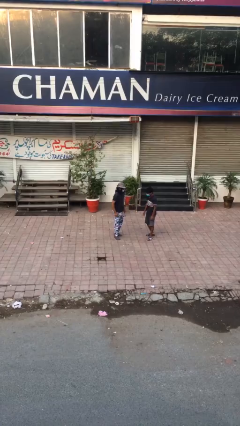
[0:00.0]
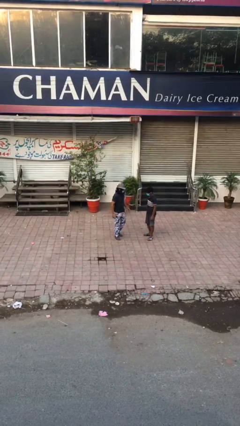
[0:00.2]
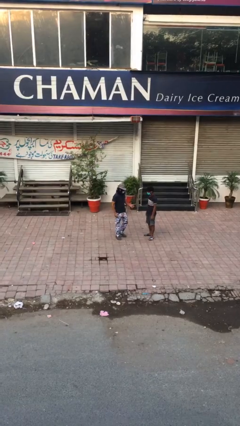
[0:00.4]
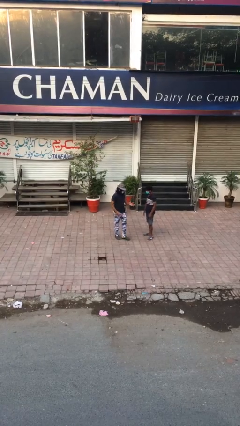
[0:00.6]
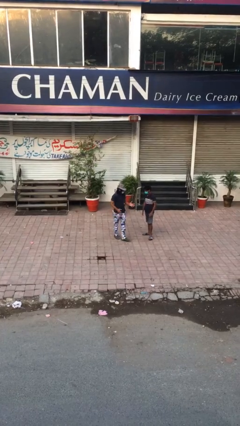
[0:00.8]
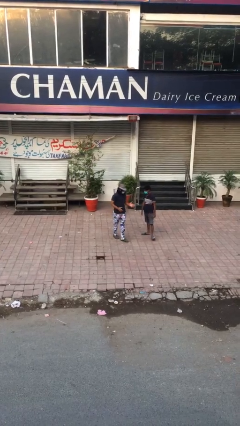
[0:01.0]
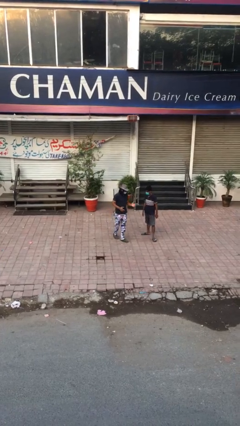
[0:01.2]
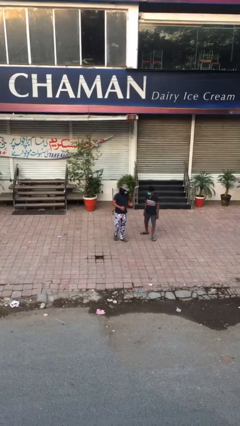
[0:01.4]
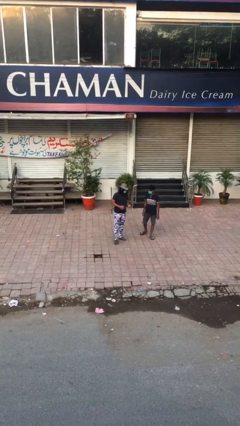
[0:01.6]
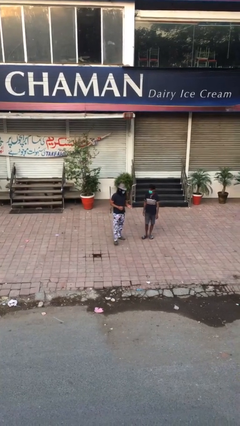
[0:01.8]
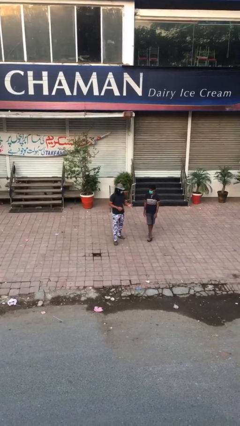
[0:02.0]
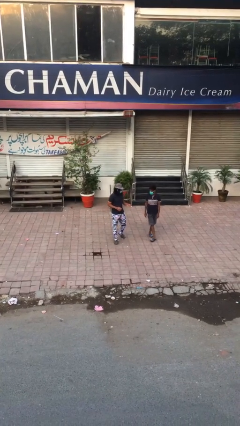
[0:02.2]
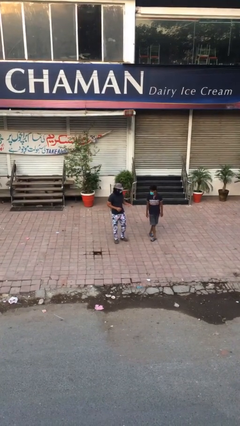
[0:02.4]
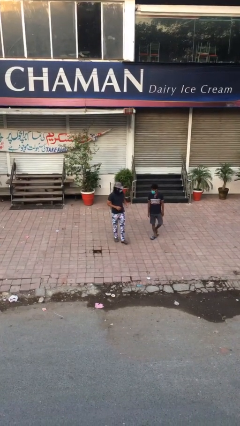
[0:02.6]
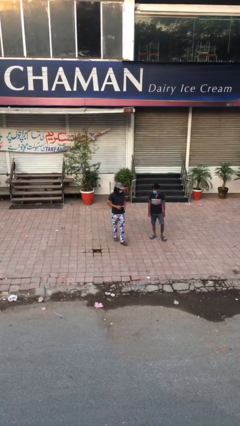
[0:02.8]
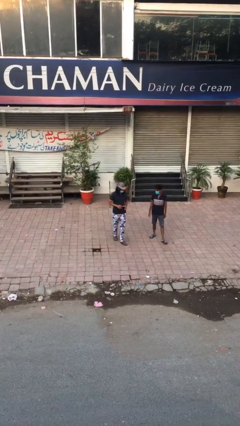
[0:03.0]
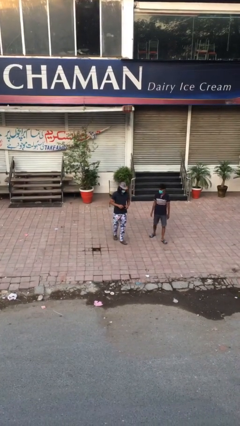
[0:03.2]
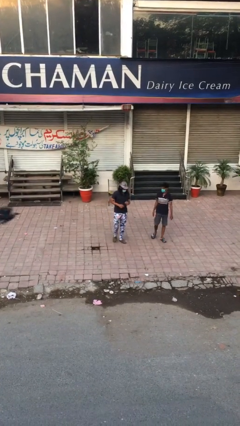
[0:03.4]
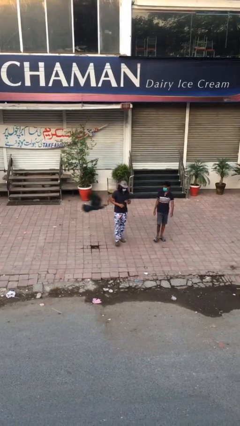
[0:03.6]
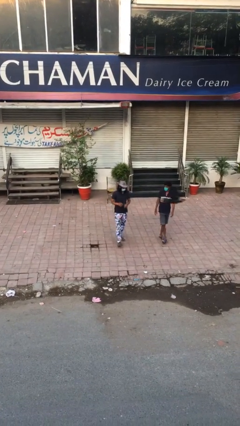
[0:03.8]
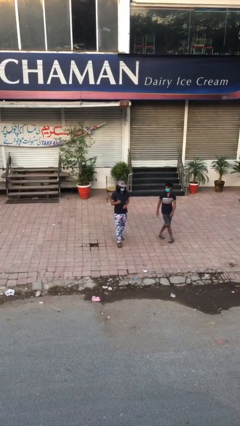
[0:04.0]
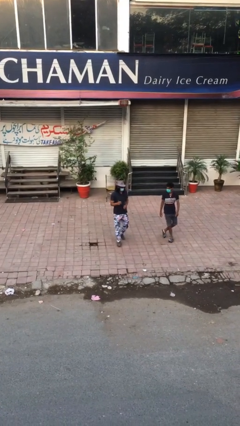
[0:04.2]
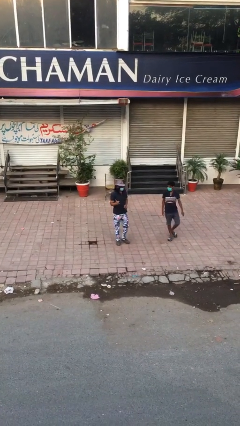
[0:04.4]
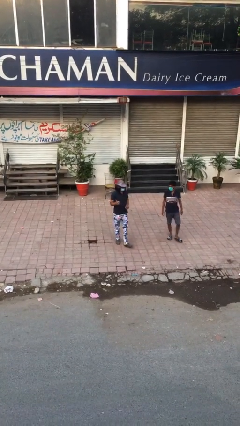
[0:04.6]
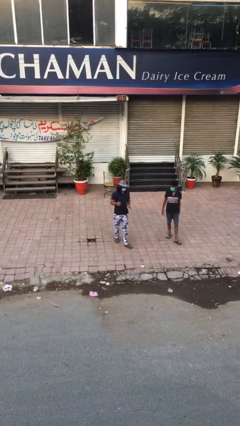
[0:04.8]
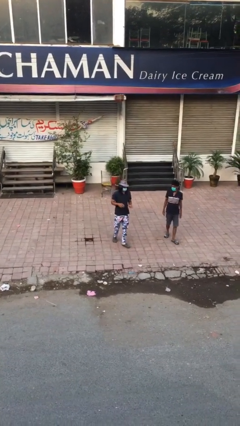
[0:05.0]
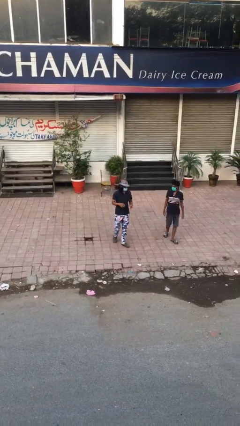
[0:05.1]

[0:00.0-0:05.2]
person talks to person

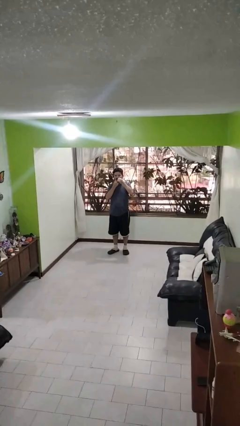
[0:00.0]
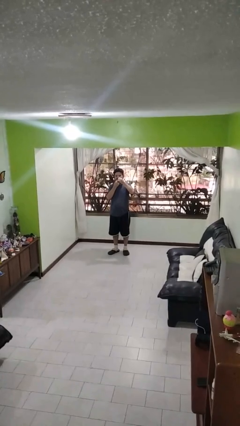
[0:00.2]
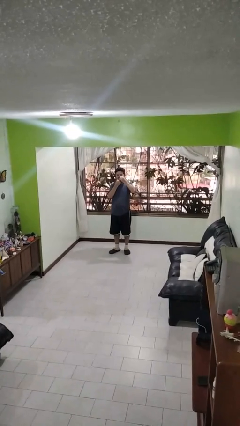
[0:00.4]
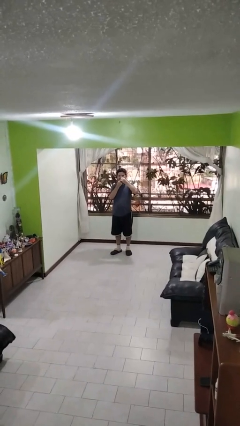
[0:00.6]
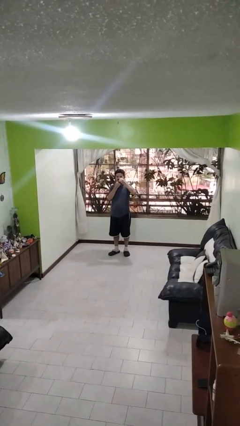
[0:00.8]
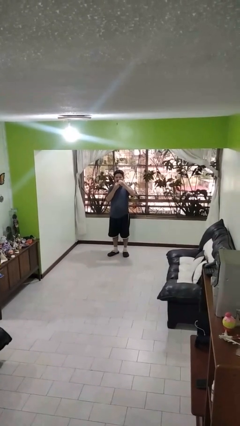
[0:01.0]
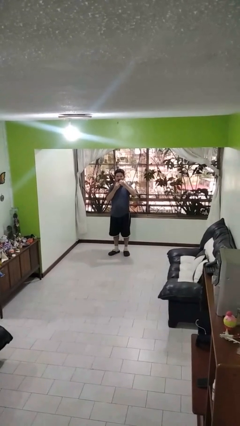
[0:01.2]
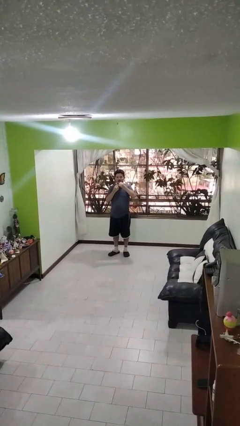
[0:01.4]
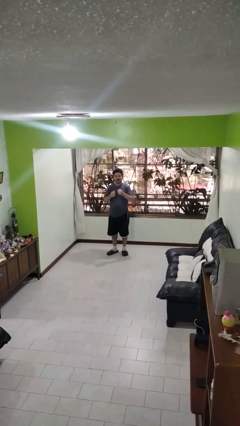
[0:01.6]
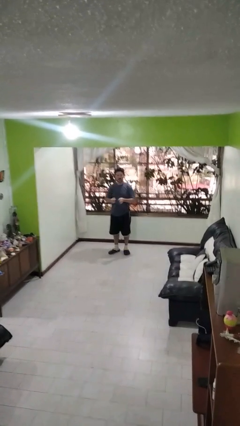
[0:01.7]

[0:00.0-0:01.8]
person flosses

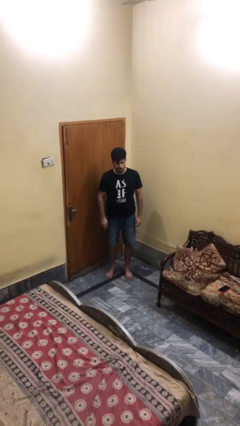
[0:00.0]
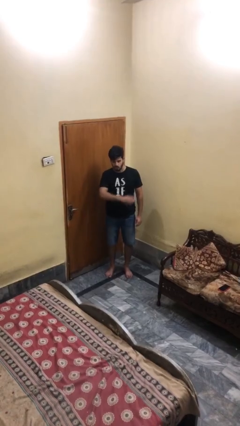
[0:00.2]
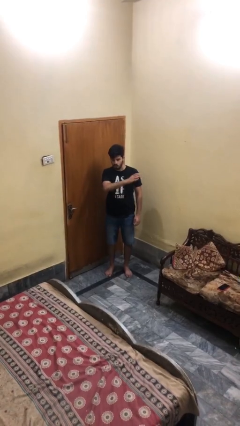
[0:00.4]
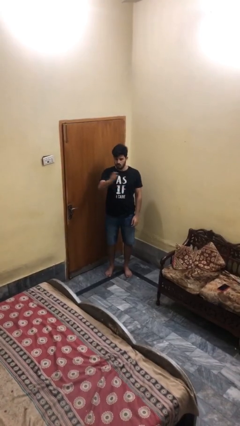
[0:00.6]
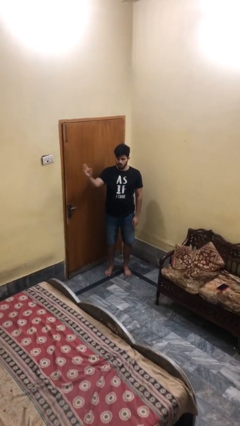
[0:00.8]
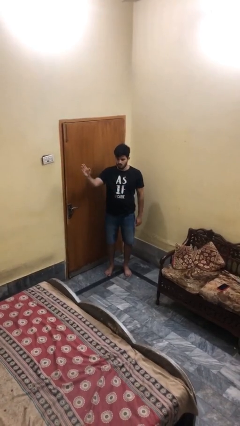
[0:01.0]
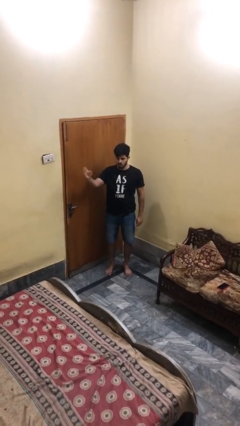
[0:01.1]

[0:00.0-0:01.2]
person gestures swipe right

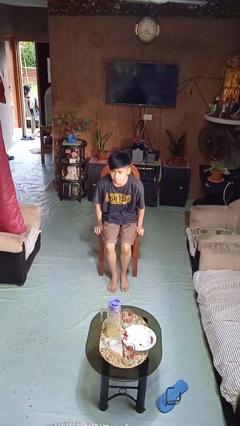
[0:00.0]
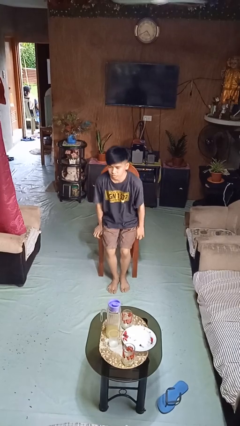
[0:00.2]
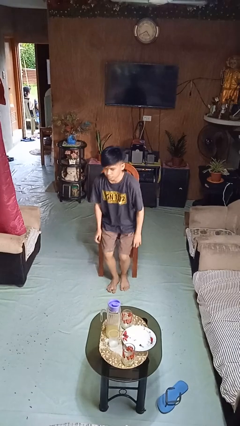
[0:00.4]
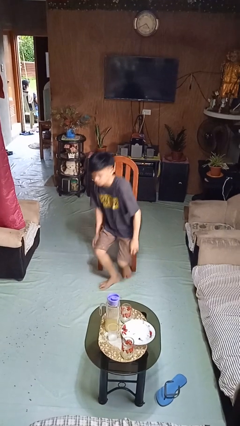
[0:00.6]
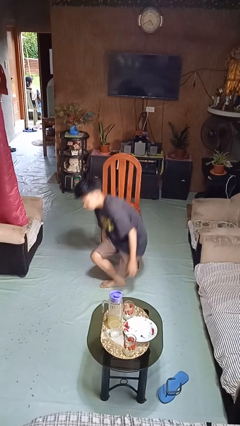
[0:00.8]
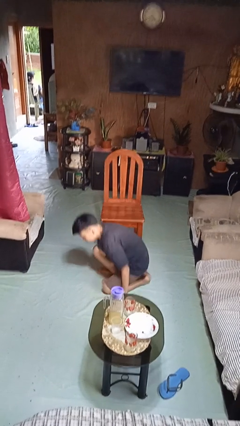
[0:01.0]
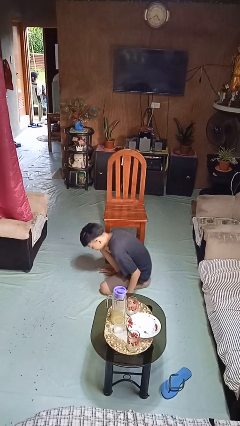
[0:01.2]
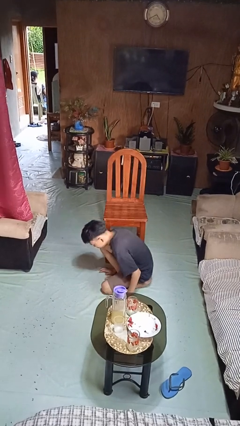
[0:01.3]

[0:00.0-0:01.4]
person falls from chair

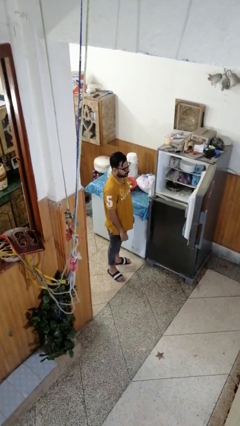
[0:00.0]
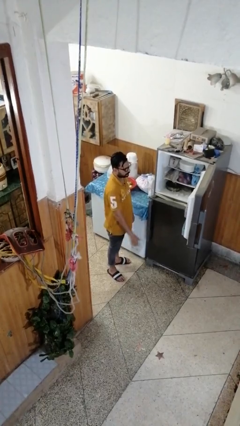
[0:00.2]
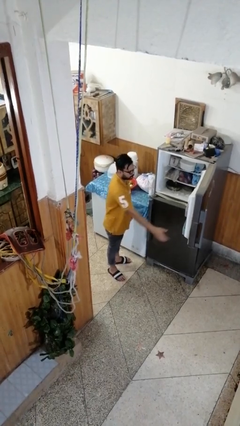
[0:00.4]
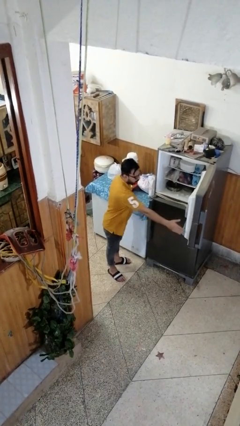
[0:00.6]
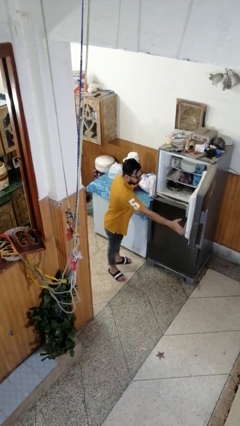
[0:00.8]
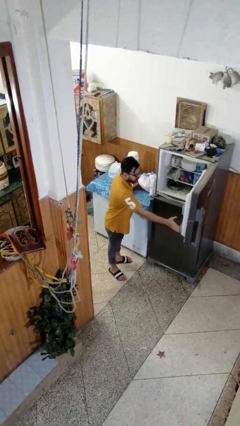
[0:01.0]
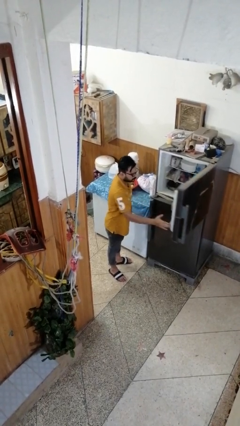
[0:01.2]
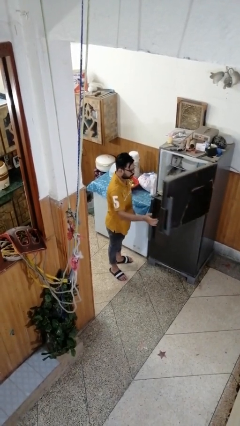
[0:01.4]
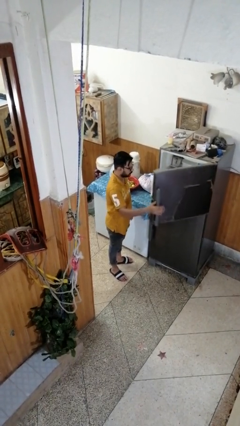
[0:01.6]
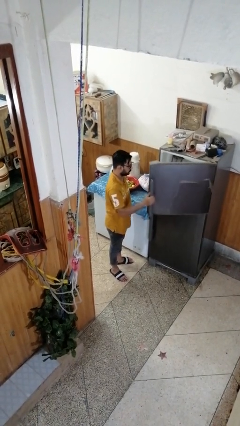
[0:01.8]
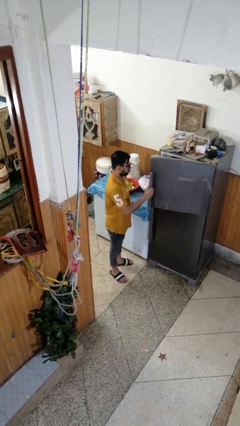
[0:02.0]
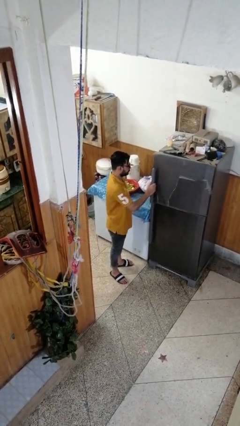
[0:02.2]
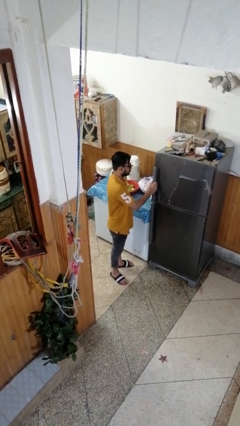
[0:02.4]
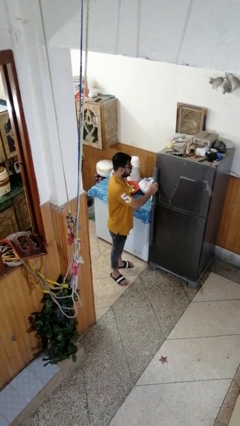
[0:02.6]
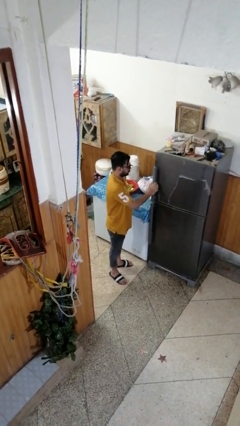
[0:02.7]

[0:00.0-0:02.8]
person closes refrigerator

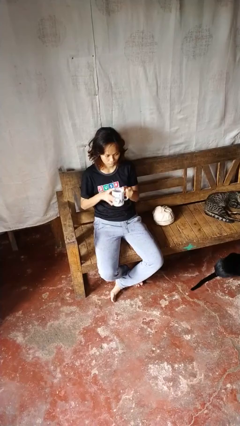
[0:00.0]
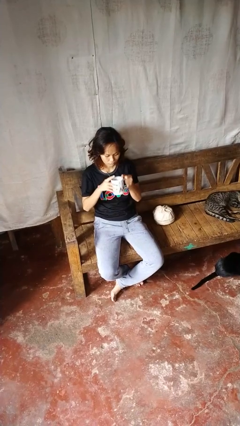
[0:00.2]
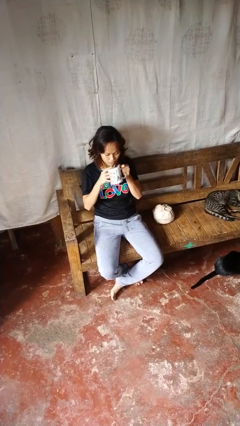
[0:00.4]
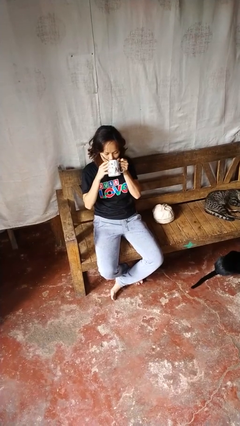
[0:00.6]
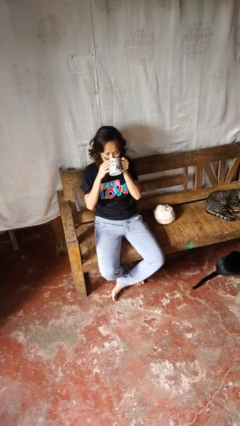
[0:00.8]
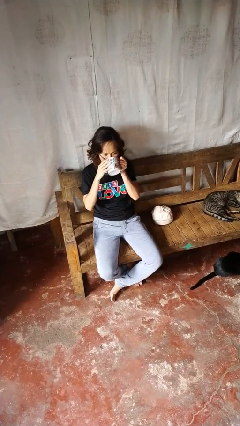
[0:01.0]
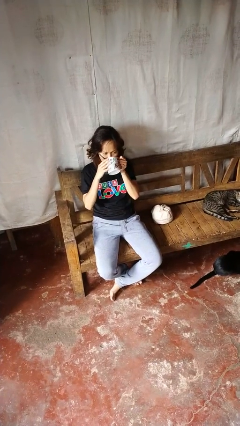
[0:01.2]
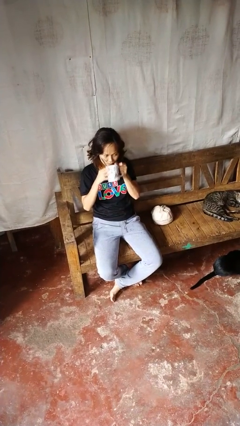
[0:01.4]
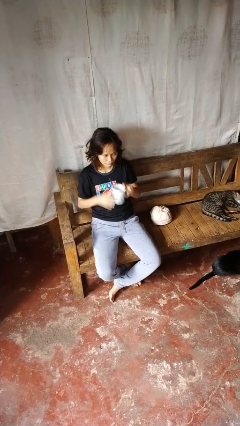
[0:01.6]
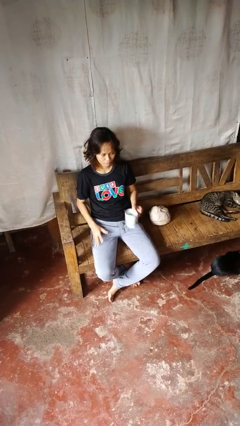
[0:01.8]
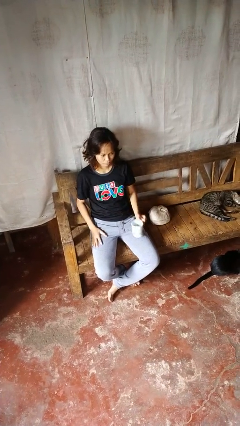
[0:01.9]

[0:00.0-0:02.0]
person drinks from mug

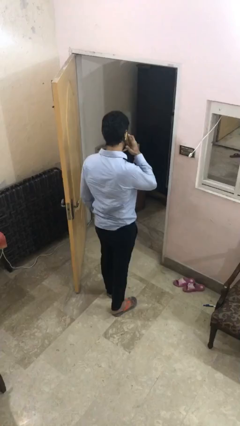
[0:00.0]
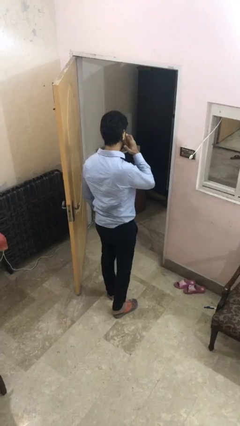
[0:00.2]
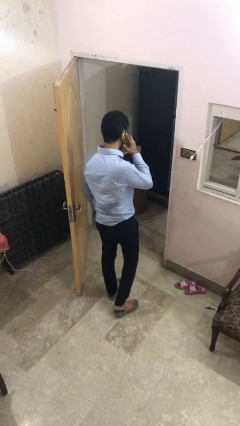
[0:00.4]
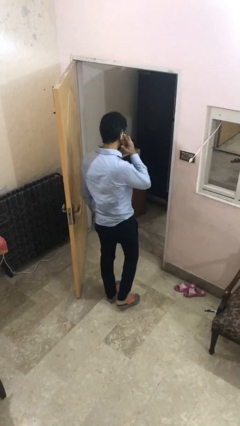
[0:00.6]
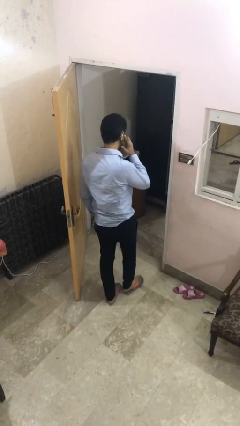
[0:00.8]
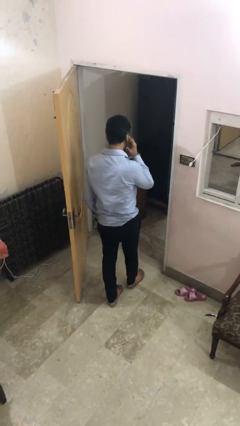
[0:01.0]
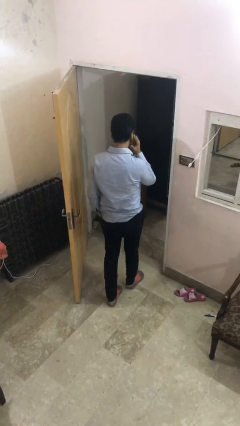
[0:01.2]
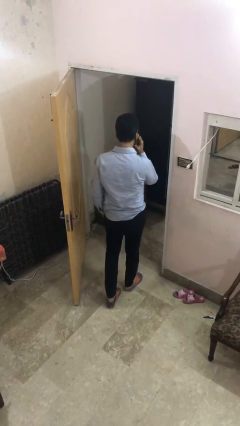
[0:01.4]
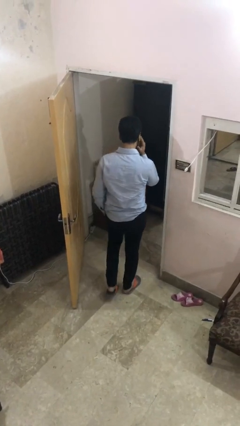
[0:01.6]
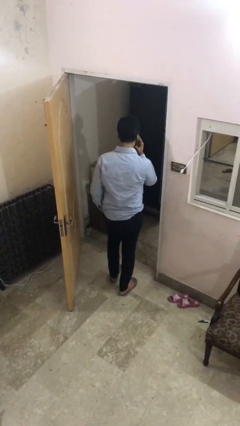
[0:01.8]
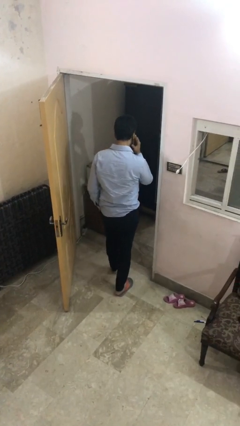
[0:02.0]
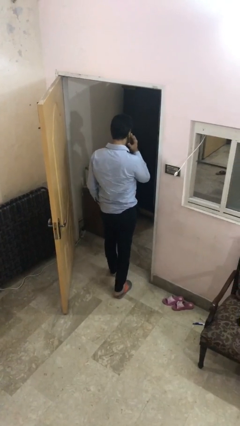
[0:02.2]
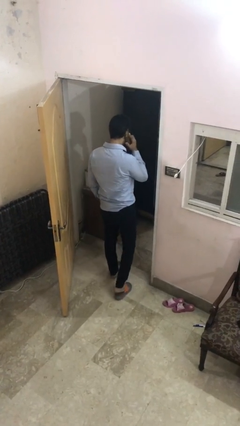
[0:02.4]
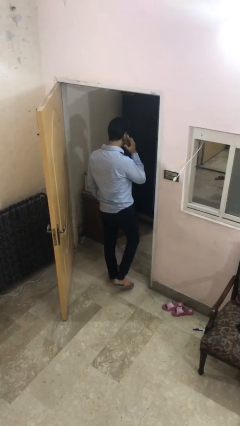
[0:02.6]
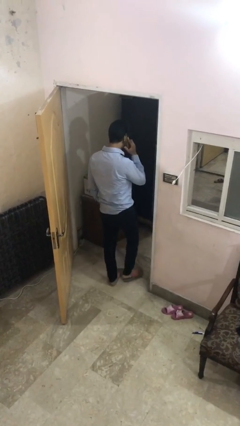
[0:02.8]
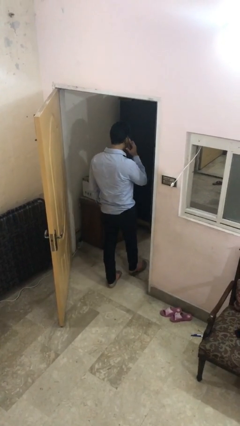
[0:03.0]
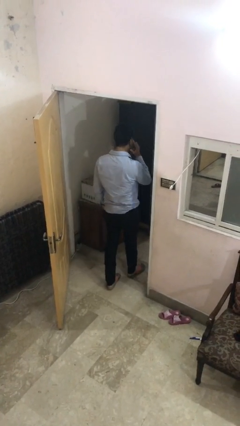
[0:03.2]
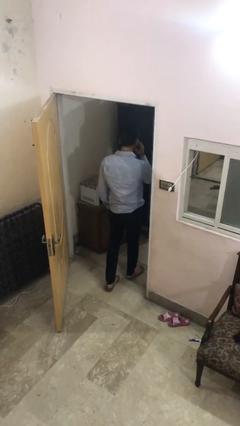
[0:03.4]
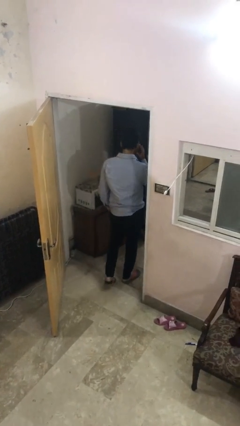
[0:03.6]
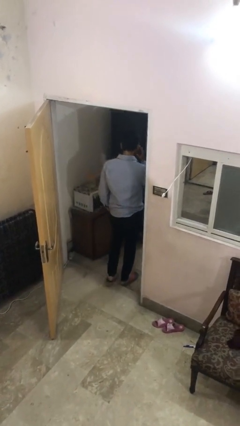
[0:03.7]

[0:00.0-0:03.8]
person exits scene through structure
